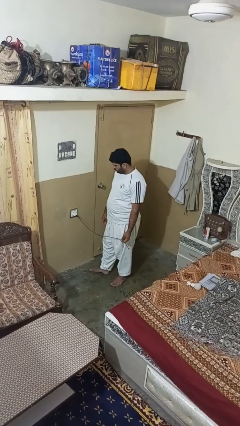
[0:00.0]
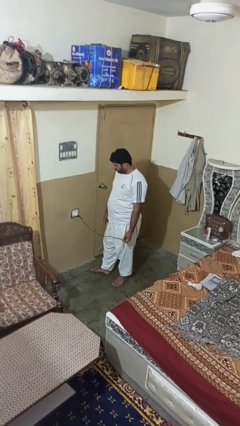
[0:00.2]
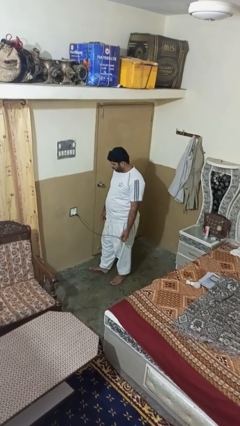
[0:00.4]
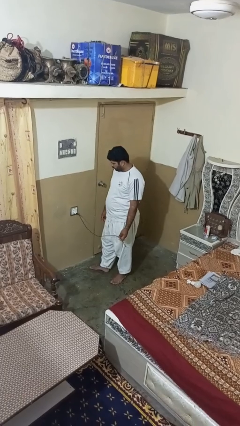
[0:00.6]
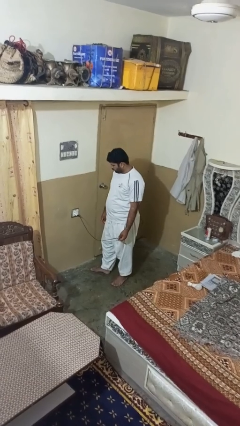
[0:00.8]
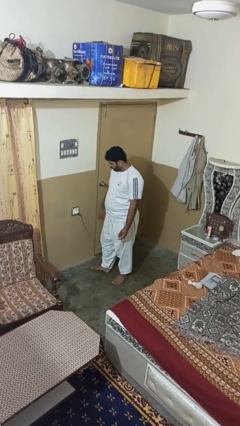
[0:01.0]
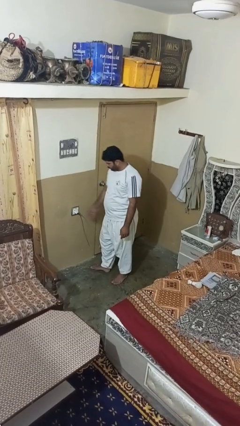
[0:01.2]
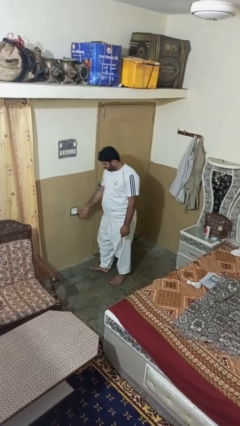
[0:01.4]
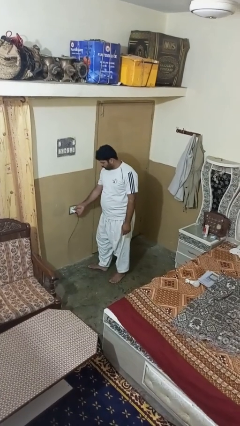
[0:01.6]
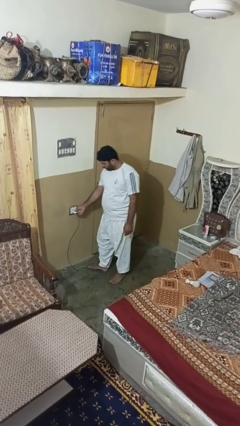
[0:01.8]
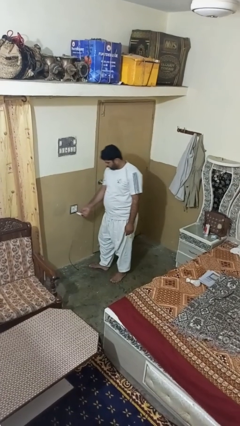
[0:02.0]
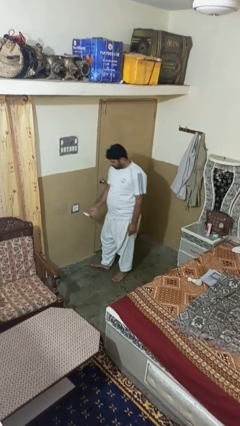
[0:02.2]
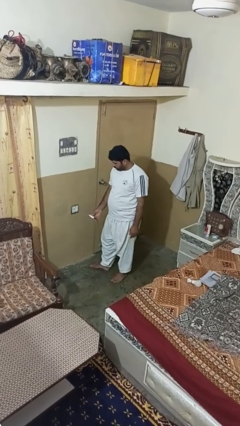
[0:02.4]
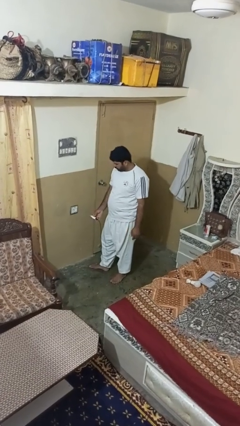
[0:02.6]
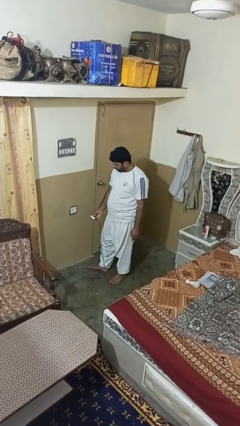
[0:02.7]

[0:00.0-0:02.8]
person unplugs from electrical socket

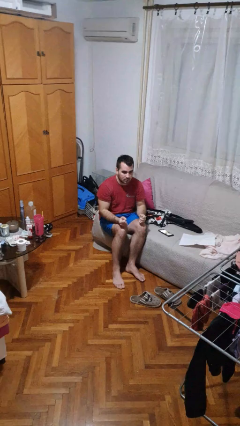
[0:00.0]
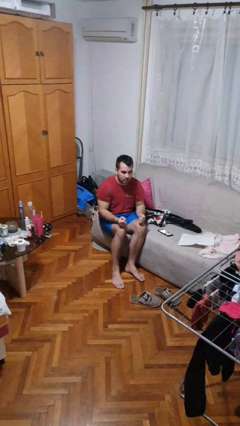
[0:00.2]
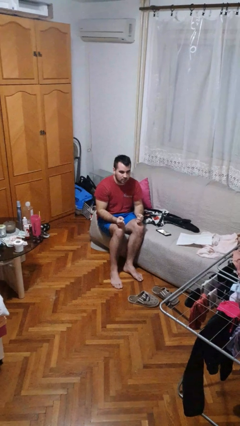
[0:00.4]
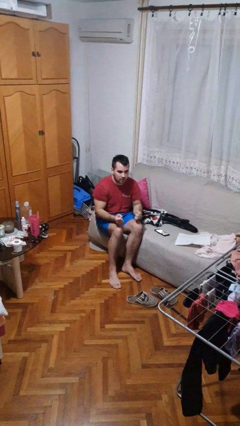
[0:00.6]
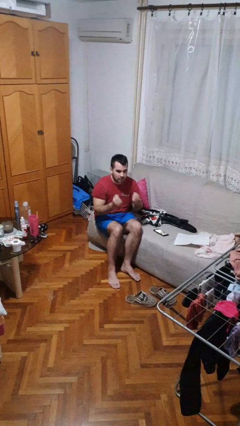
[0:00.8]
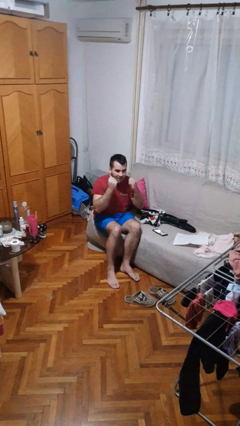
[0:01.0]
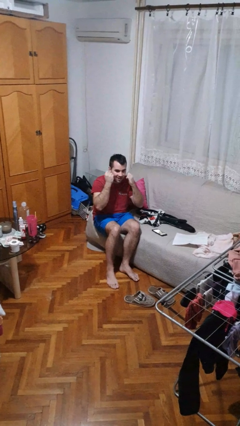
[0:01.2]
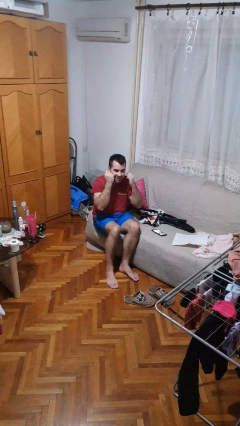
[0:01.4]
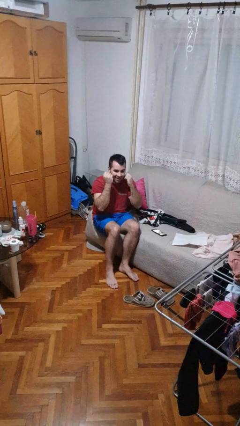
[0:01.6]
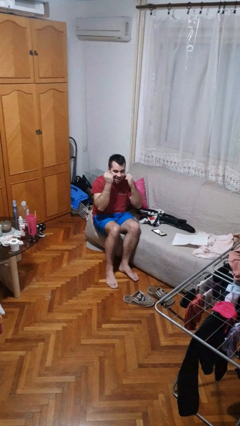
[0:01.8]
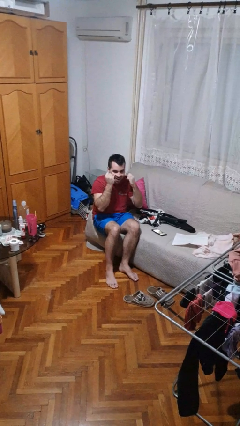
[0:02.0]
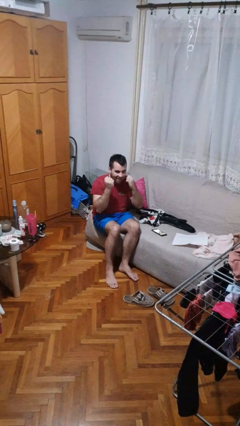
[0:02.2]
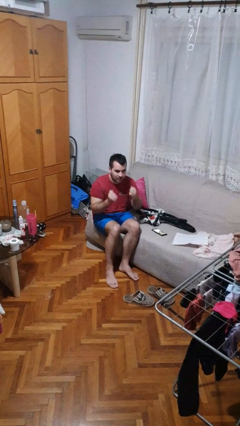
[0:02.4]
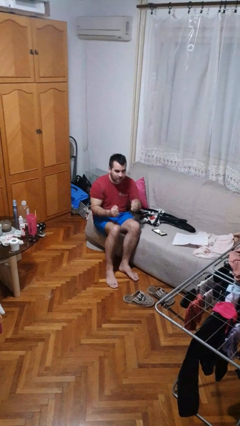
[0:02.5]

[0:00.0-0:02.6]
person flosses

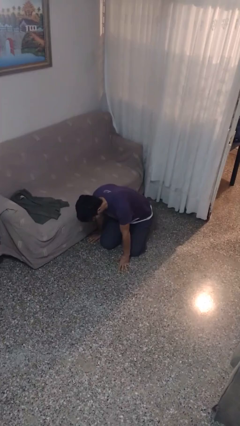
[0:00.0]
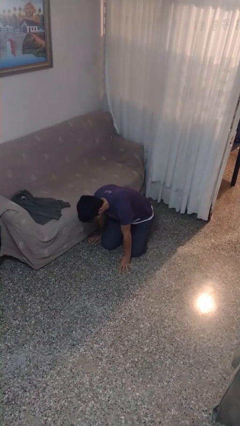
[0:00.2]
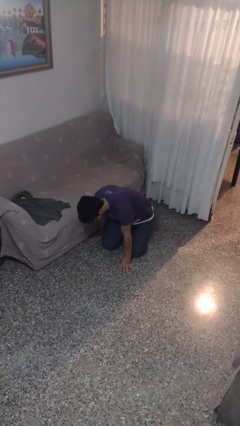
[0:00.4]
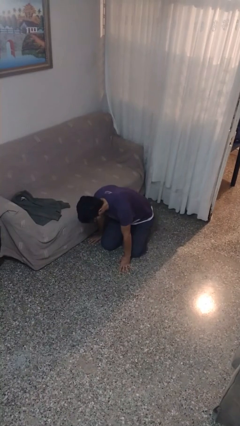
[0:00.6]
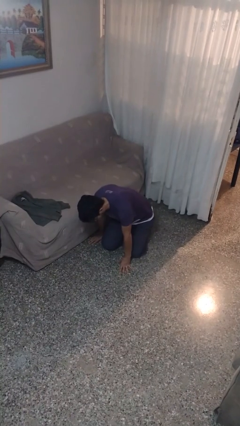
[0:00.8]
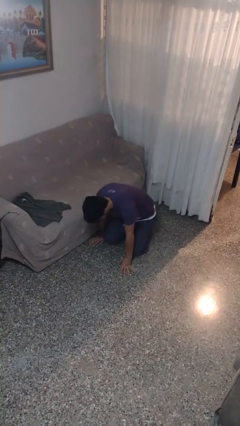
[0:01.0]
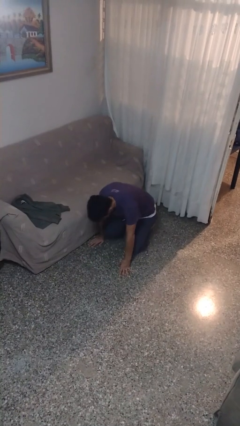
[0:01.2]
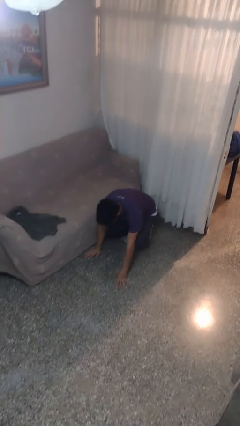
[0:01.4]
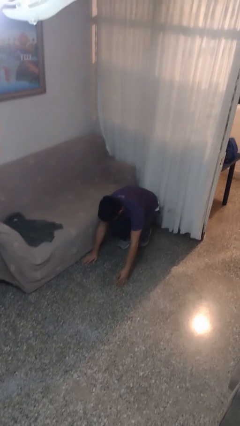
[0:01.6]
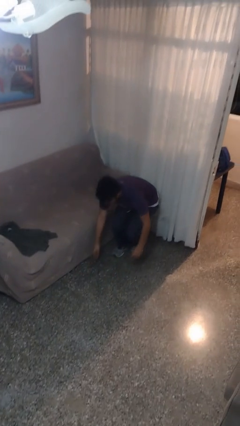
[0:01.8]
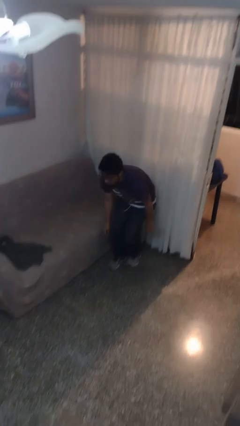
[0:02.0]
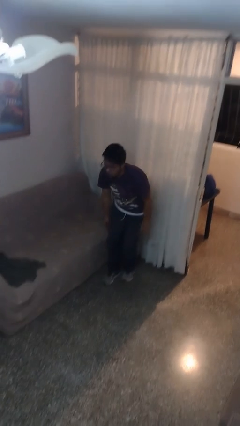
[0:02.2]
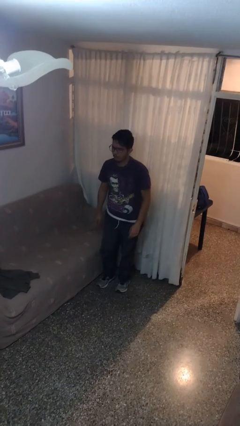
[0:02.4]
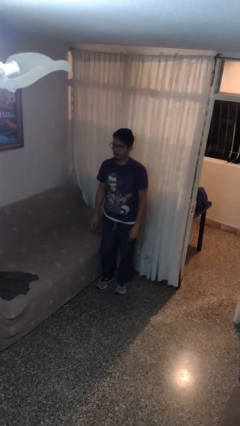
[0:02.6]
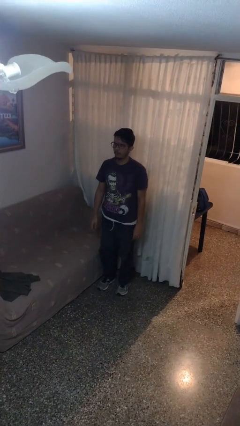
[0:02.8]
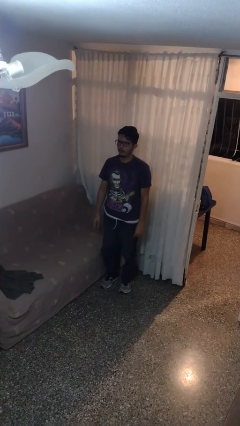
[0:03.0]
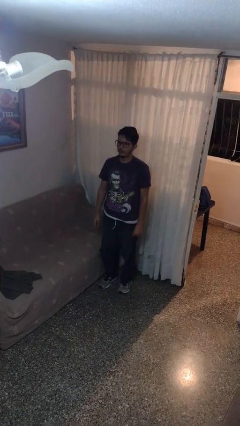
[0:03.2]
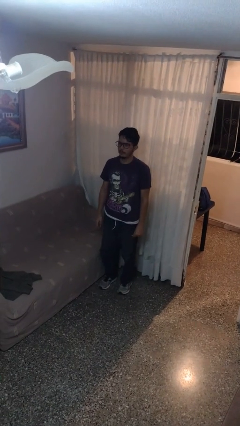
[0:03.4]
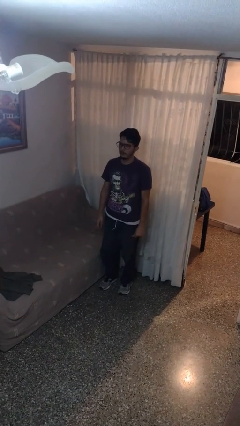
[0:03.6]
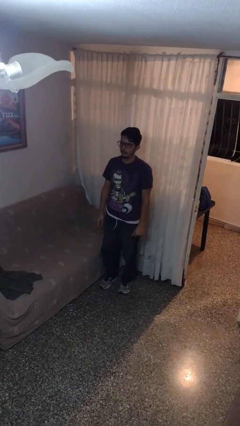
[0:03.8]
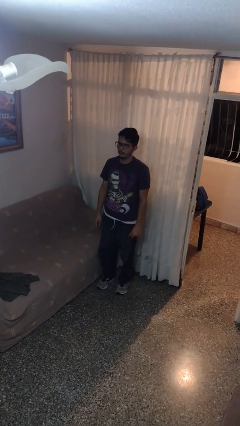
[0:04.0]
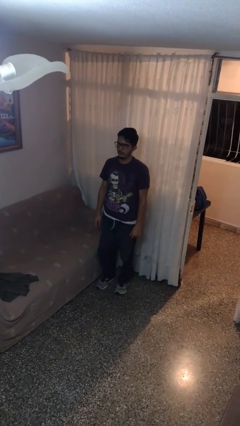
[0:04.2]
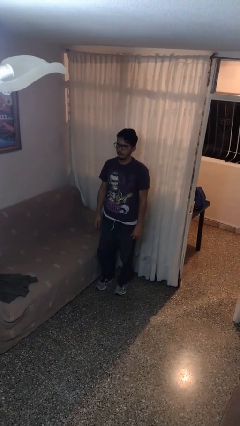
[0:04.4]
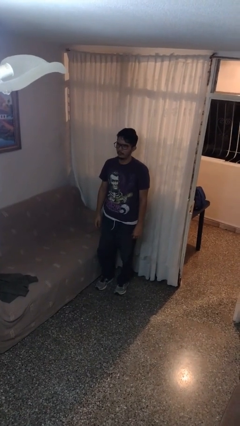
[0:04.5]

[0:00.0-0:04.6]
person stands up from floor

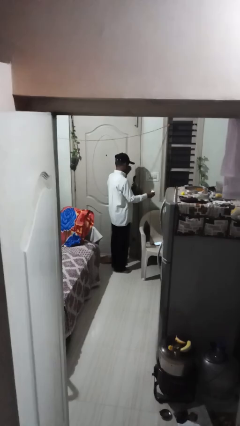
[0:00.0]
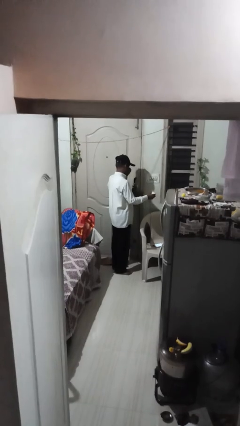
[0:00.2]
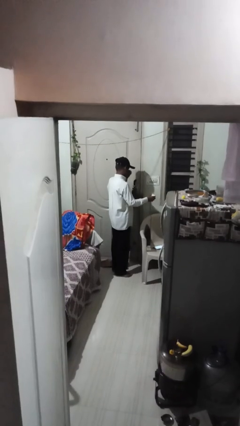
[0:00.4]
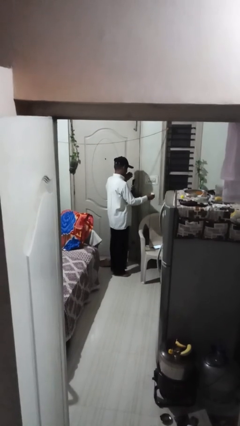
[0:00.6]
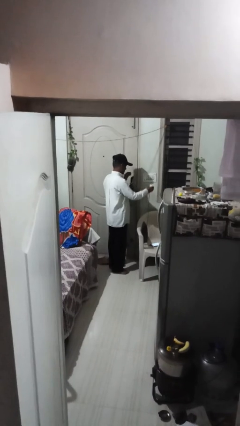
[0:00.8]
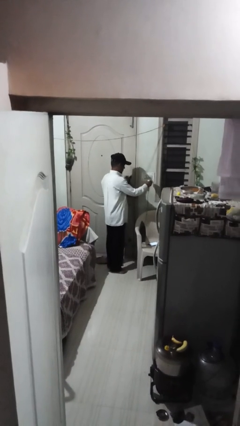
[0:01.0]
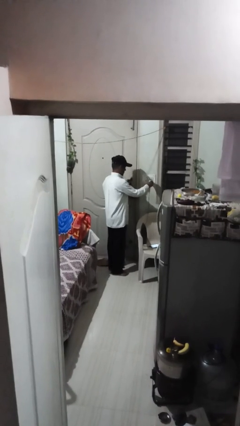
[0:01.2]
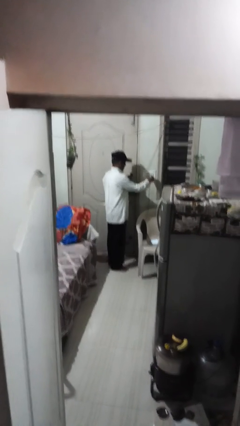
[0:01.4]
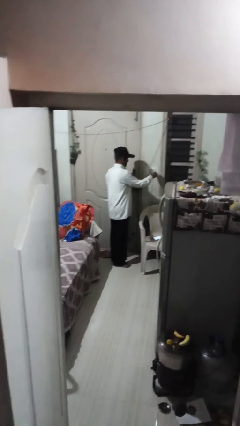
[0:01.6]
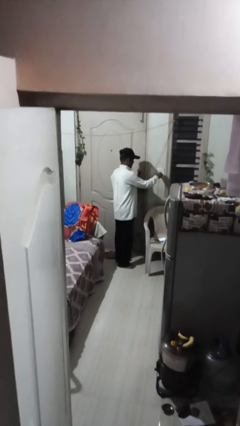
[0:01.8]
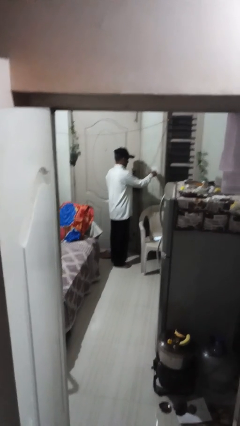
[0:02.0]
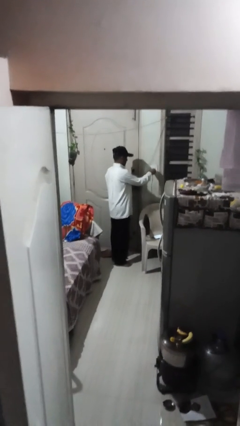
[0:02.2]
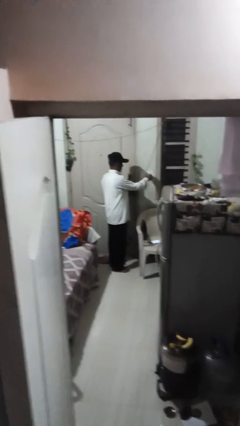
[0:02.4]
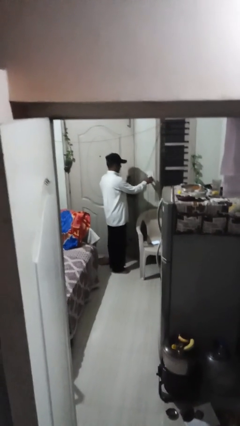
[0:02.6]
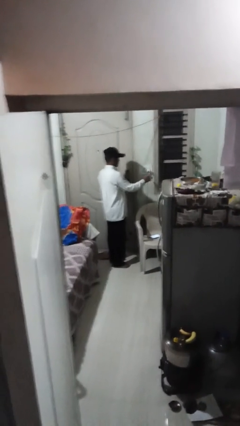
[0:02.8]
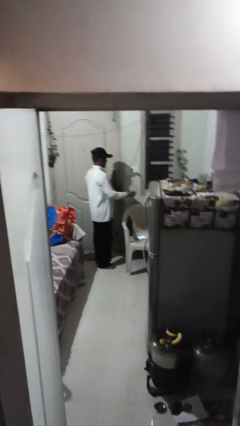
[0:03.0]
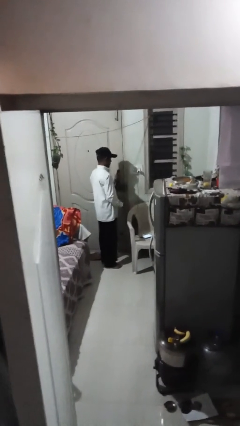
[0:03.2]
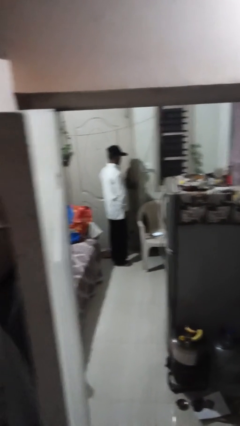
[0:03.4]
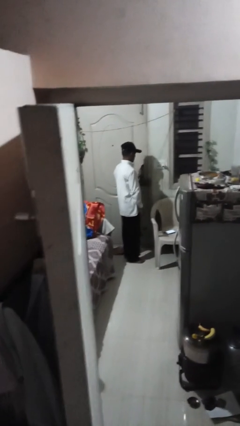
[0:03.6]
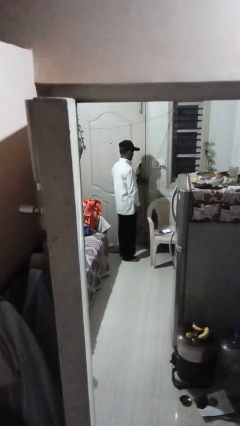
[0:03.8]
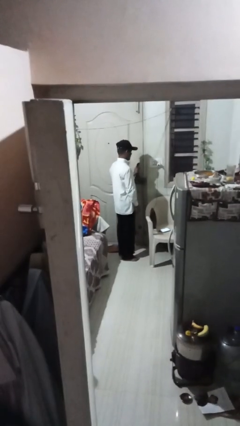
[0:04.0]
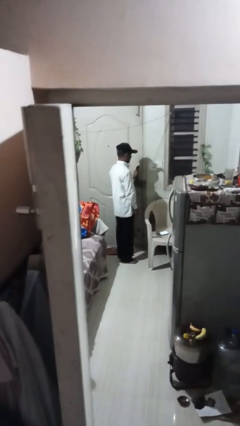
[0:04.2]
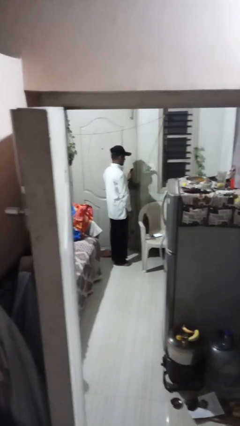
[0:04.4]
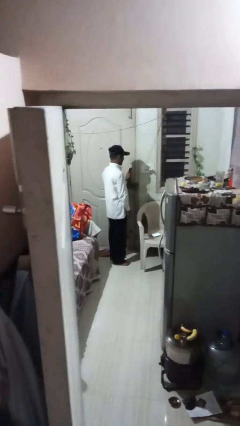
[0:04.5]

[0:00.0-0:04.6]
person plugs into electrical socket

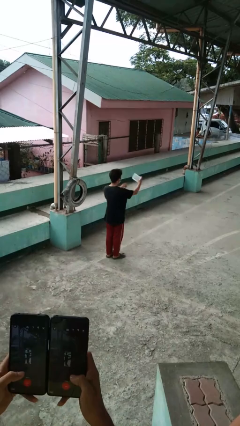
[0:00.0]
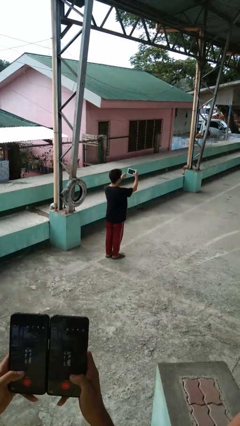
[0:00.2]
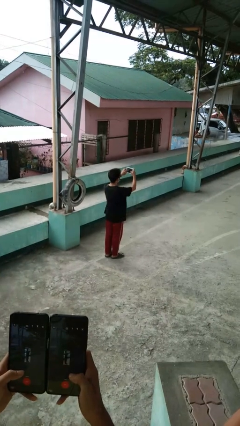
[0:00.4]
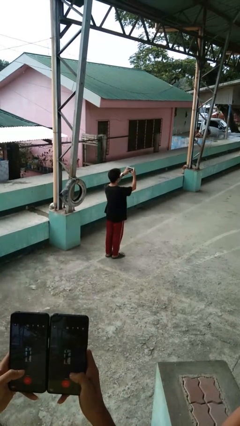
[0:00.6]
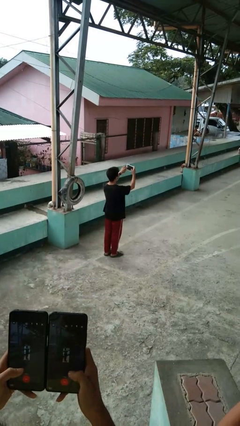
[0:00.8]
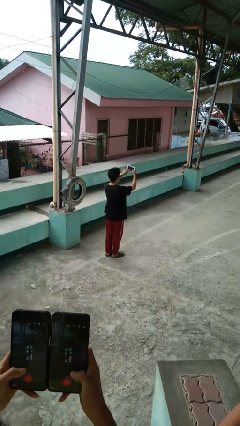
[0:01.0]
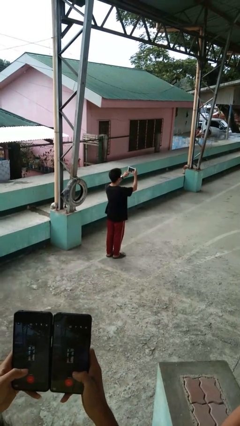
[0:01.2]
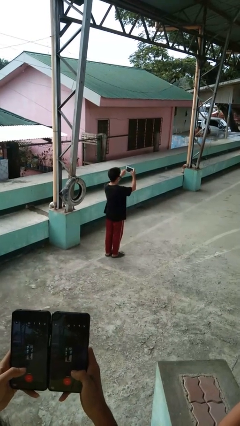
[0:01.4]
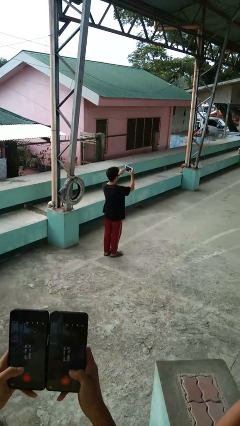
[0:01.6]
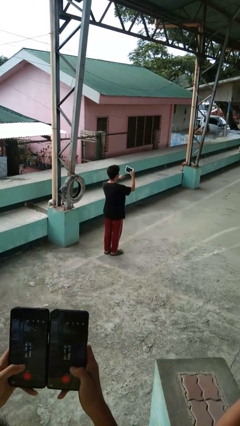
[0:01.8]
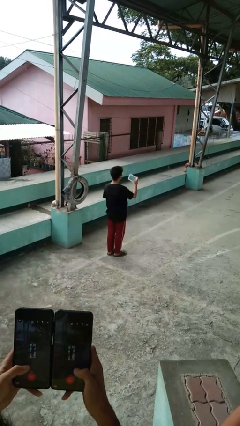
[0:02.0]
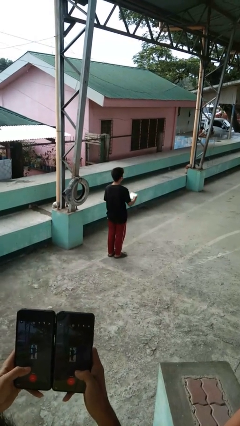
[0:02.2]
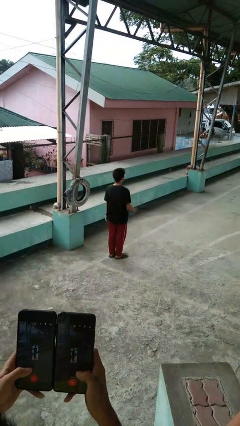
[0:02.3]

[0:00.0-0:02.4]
person interacts with tablet

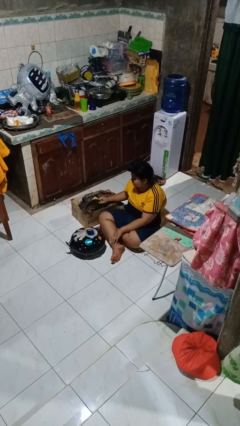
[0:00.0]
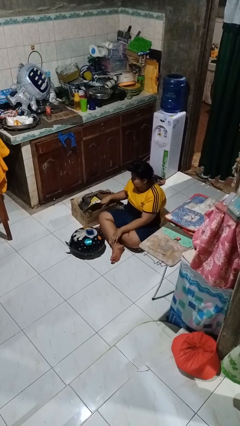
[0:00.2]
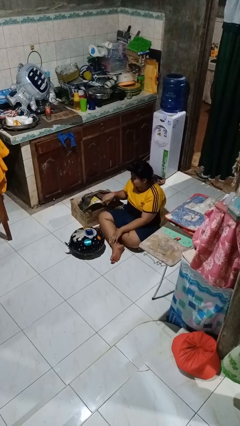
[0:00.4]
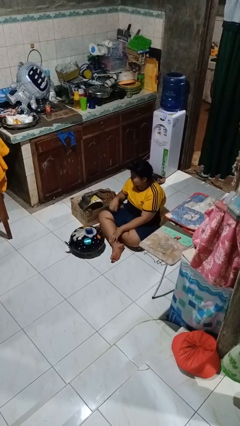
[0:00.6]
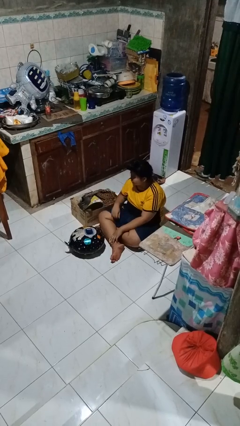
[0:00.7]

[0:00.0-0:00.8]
person puts object into box
